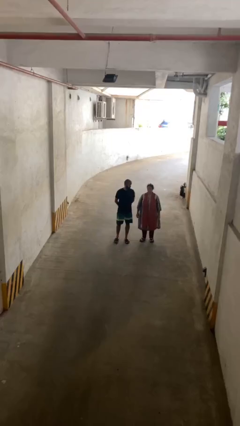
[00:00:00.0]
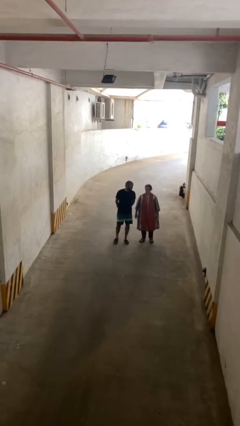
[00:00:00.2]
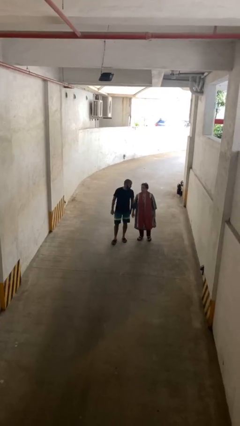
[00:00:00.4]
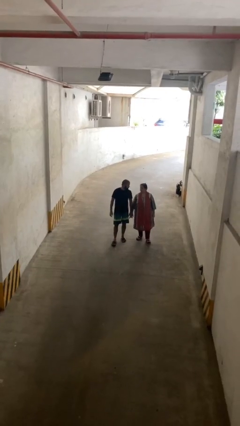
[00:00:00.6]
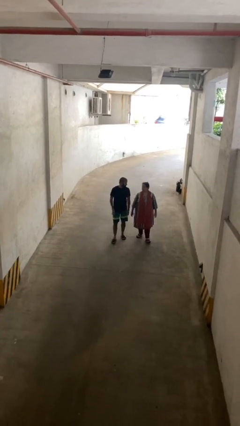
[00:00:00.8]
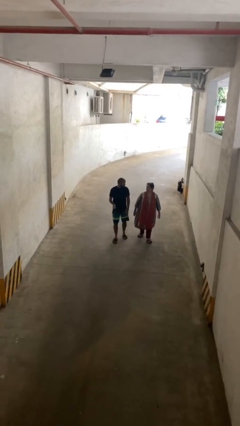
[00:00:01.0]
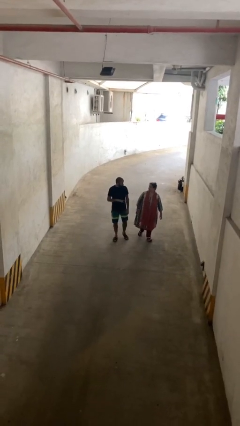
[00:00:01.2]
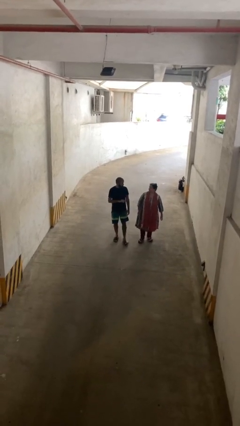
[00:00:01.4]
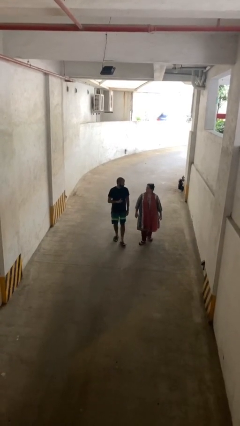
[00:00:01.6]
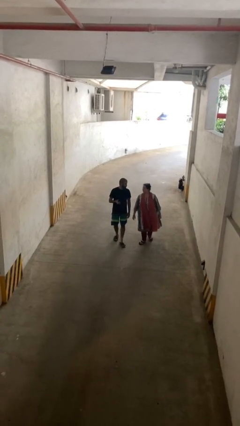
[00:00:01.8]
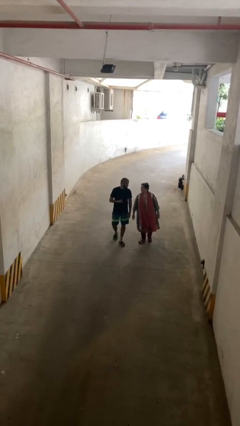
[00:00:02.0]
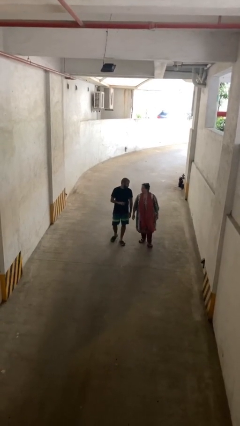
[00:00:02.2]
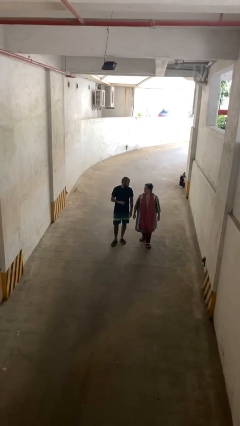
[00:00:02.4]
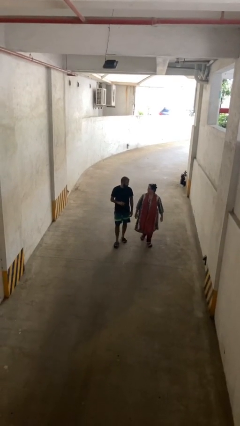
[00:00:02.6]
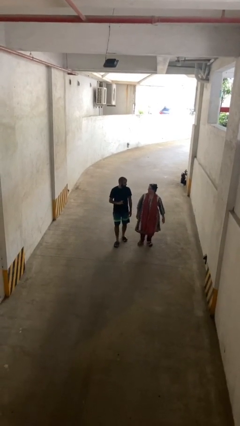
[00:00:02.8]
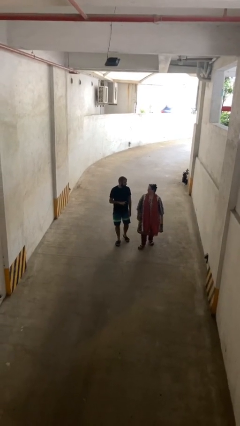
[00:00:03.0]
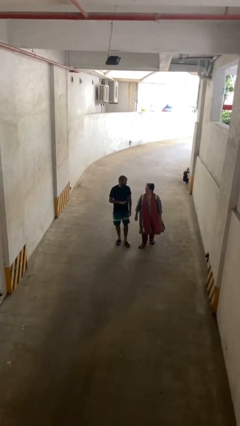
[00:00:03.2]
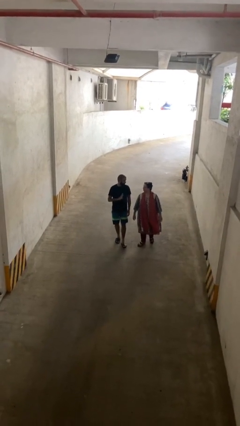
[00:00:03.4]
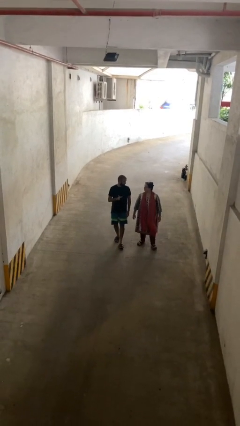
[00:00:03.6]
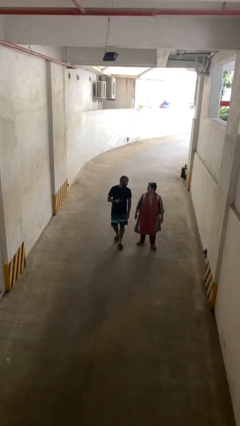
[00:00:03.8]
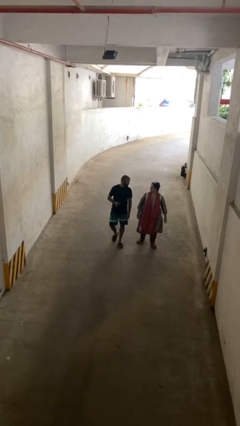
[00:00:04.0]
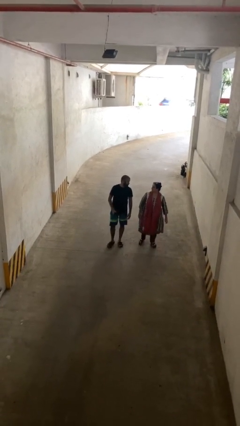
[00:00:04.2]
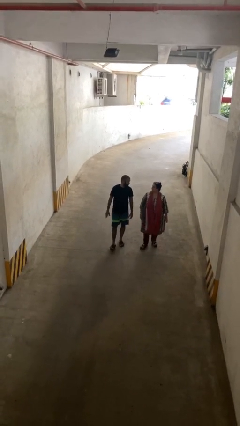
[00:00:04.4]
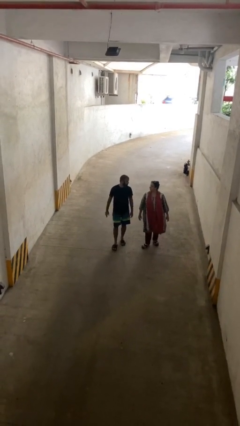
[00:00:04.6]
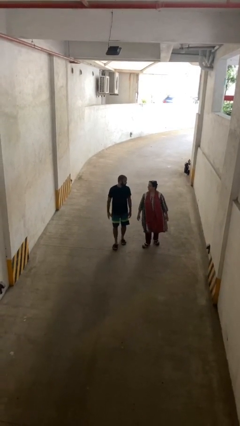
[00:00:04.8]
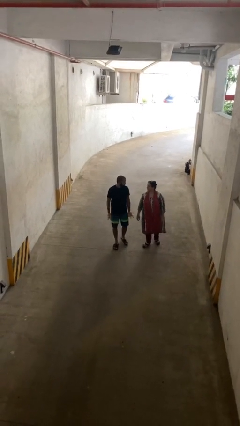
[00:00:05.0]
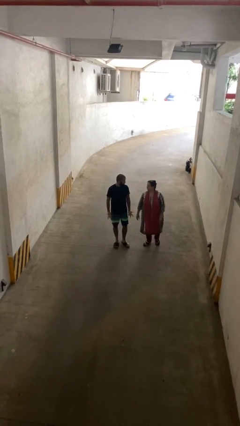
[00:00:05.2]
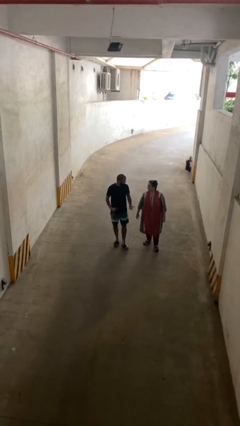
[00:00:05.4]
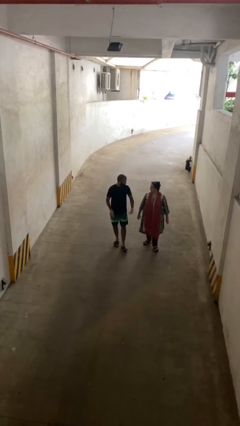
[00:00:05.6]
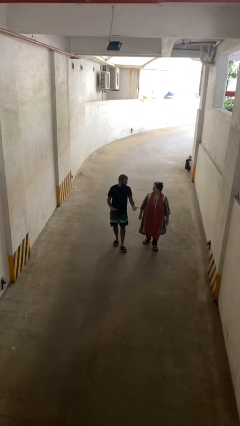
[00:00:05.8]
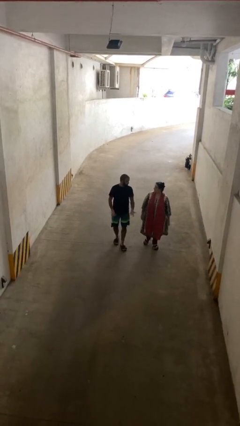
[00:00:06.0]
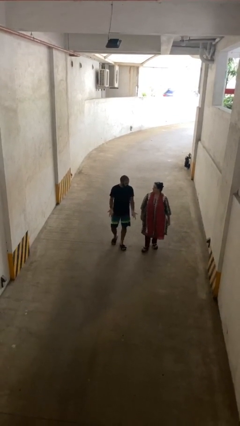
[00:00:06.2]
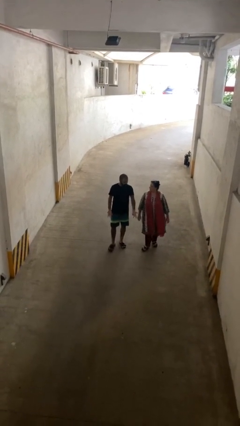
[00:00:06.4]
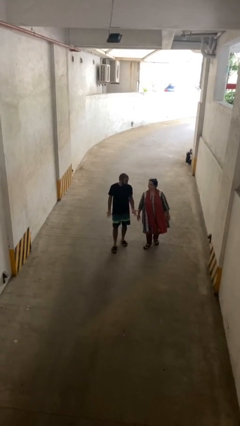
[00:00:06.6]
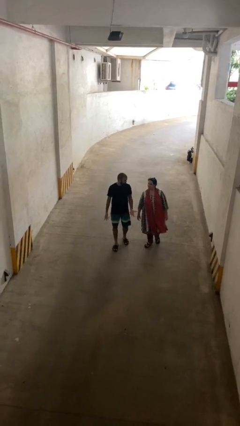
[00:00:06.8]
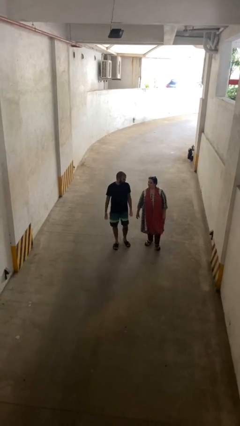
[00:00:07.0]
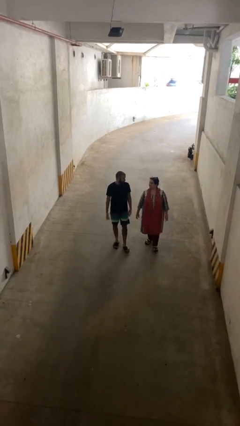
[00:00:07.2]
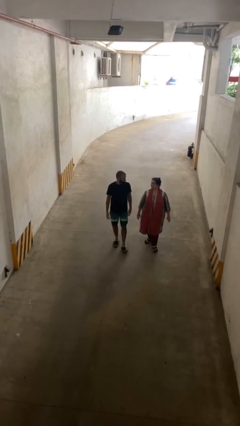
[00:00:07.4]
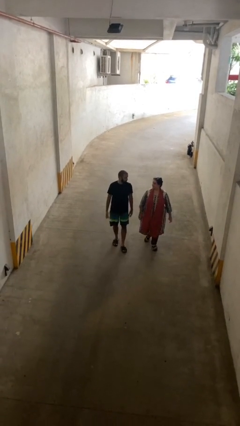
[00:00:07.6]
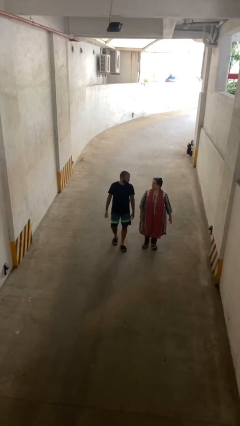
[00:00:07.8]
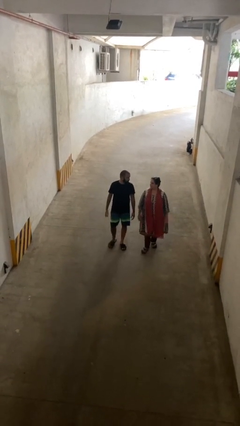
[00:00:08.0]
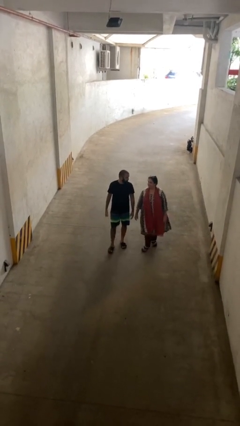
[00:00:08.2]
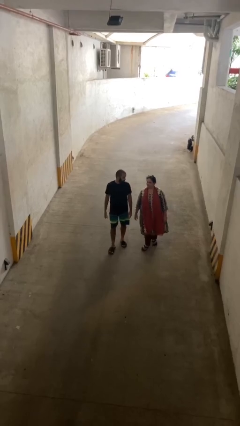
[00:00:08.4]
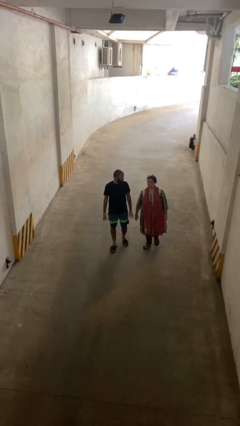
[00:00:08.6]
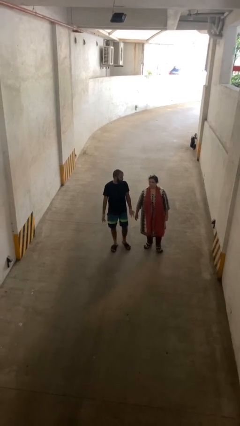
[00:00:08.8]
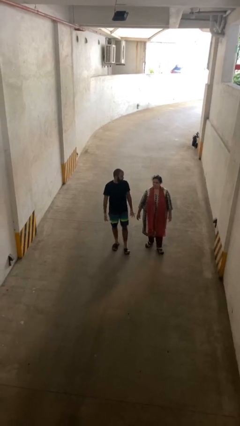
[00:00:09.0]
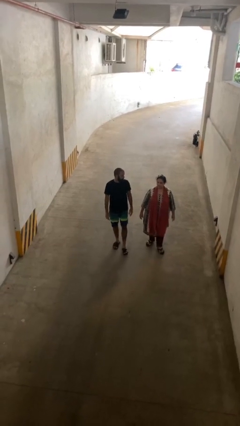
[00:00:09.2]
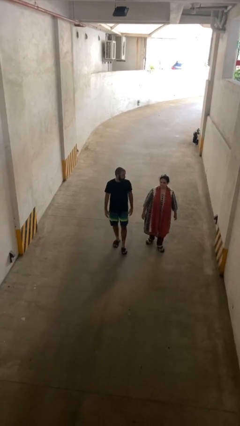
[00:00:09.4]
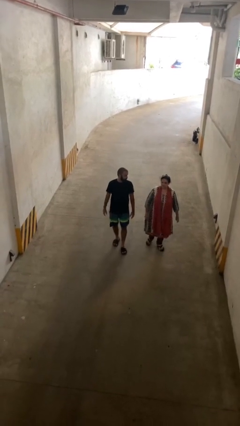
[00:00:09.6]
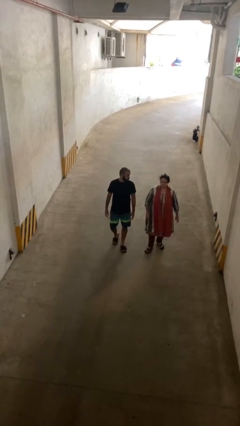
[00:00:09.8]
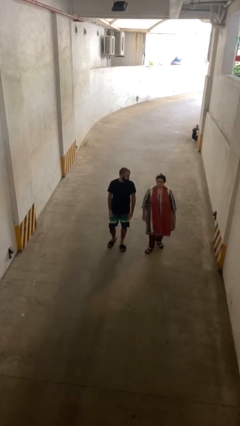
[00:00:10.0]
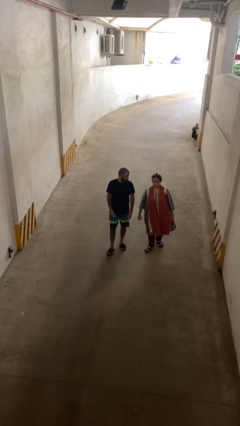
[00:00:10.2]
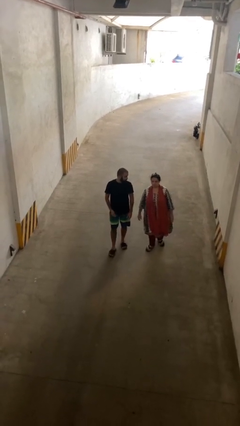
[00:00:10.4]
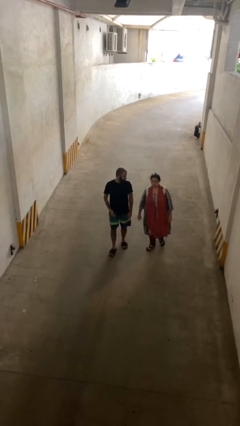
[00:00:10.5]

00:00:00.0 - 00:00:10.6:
person talks to person

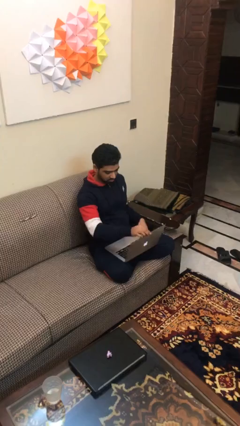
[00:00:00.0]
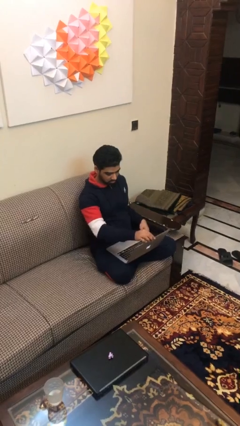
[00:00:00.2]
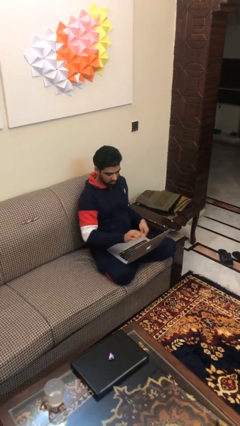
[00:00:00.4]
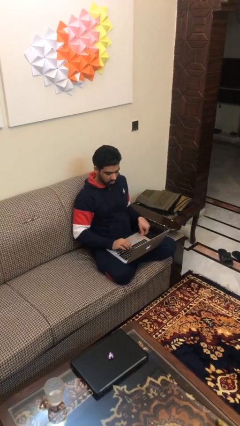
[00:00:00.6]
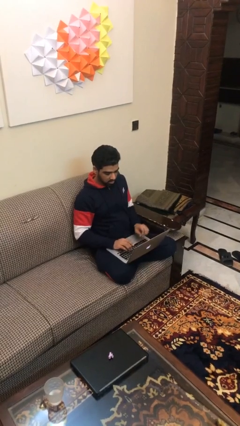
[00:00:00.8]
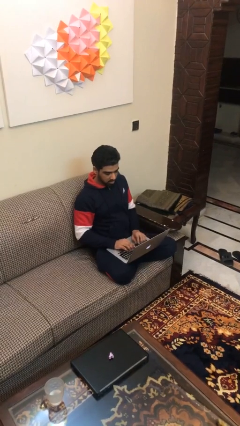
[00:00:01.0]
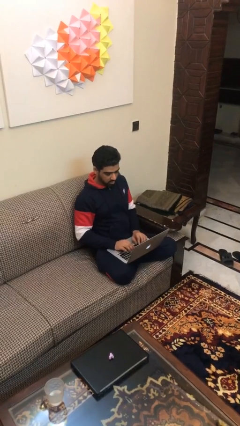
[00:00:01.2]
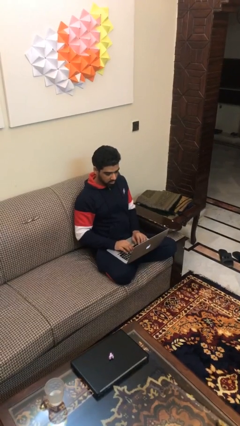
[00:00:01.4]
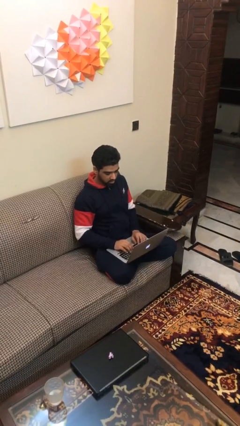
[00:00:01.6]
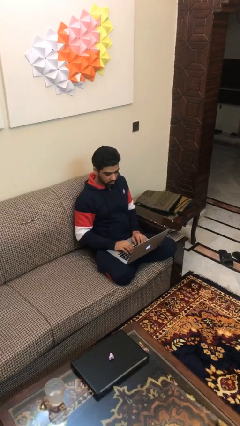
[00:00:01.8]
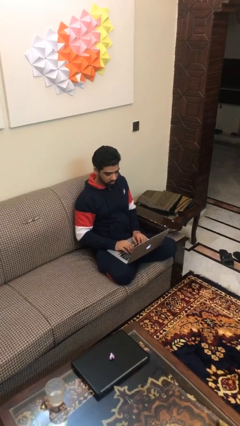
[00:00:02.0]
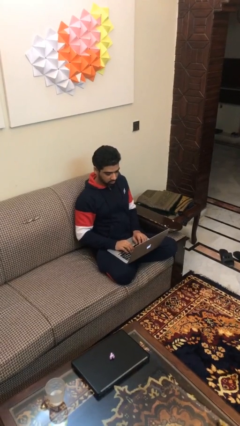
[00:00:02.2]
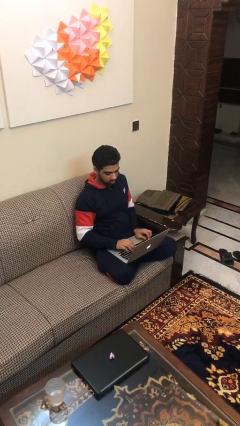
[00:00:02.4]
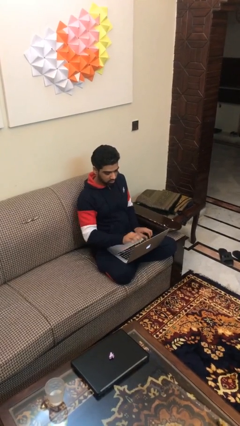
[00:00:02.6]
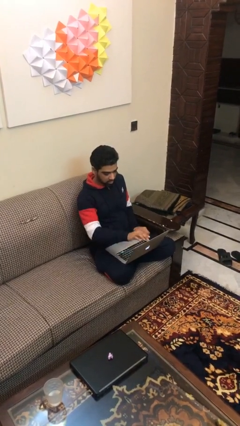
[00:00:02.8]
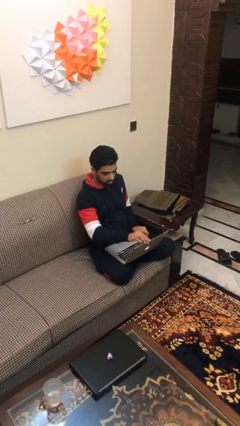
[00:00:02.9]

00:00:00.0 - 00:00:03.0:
person interacts with laptop

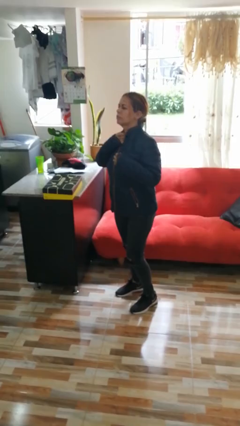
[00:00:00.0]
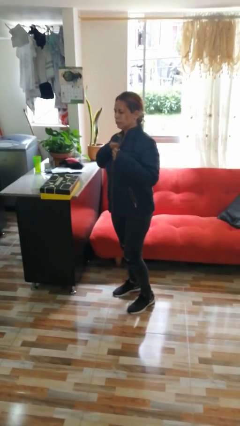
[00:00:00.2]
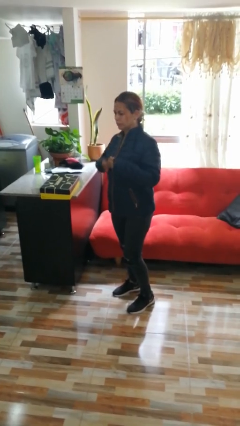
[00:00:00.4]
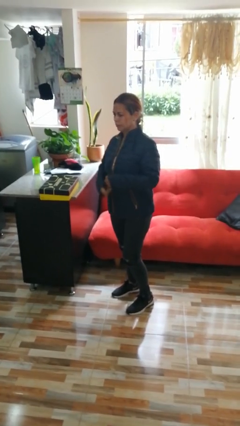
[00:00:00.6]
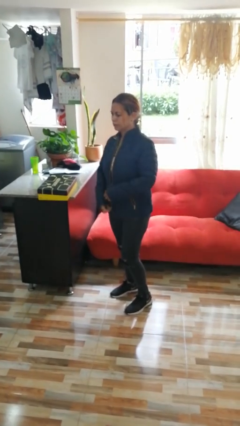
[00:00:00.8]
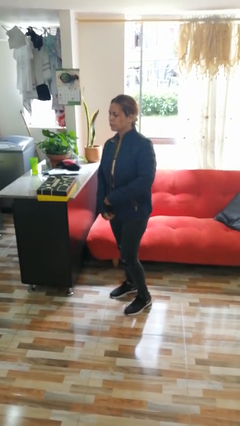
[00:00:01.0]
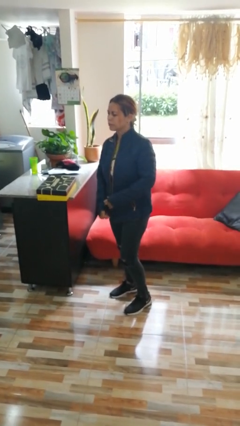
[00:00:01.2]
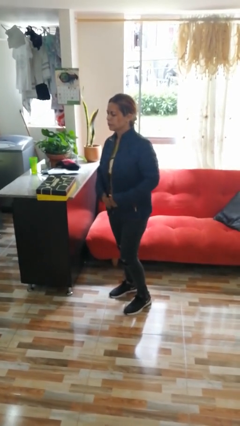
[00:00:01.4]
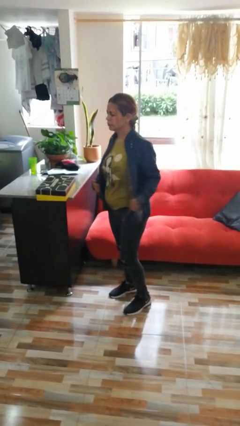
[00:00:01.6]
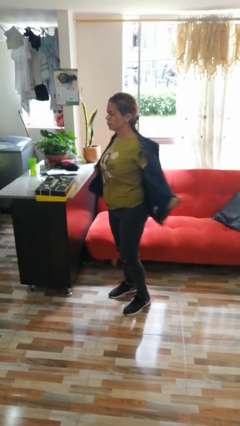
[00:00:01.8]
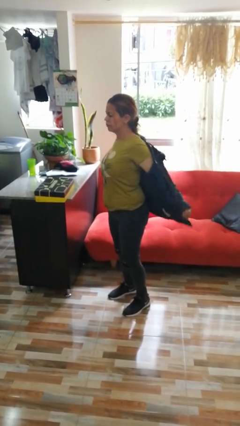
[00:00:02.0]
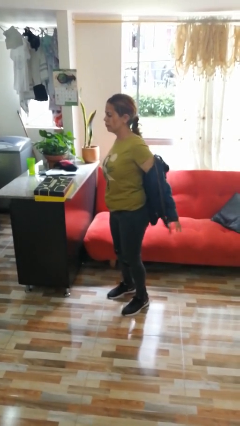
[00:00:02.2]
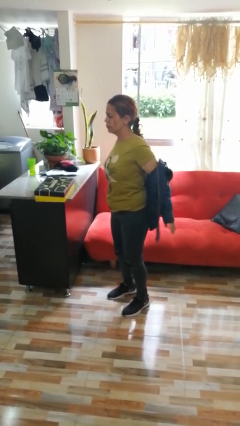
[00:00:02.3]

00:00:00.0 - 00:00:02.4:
person zips up jacket

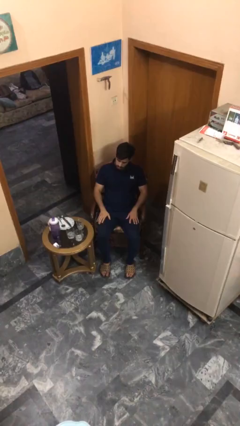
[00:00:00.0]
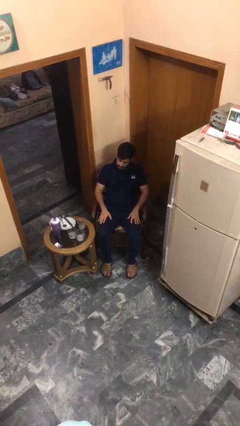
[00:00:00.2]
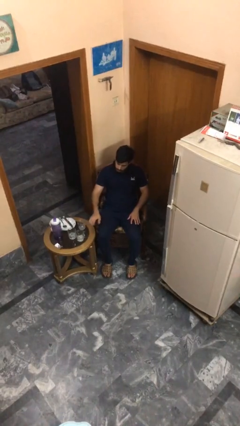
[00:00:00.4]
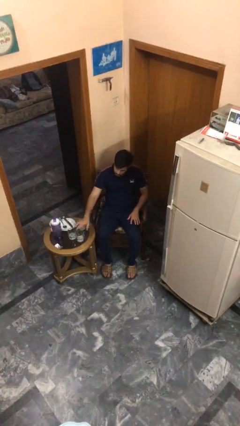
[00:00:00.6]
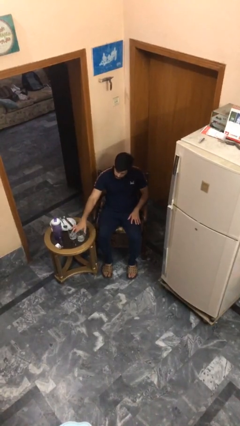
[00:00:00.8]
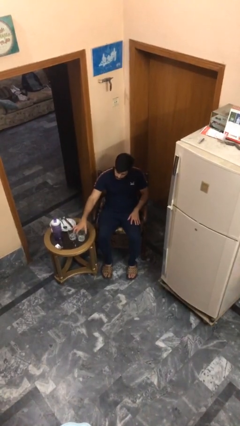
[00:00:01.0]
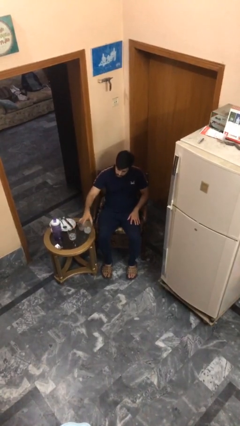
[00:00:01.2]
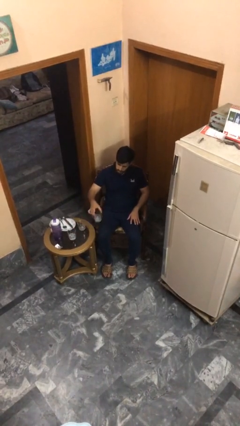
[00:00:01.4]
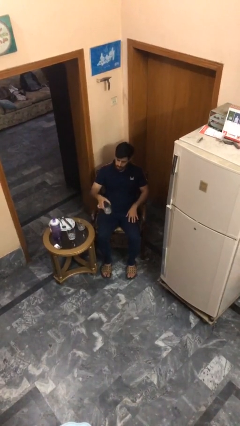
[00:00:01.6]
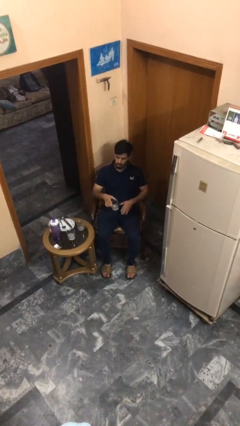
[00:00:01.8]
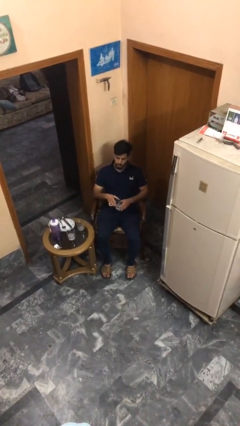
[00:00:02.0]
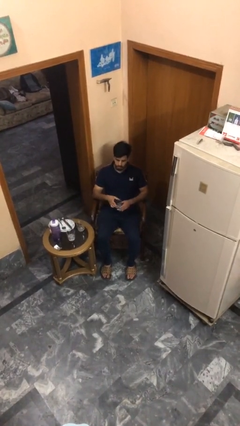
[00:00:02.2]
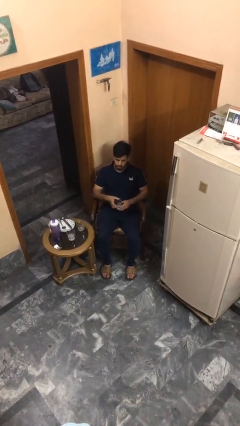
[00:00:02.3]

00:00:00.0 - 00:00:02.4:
person picks up object from table
